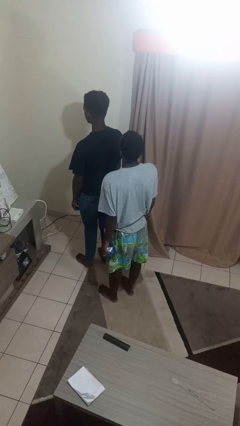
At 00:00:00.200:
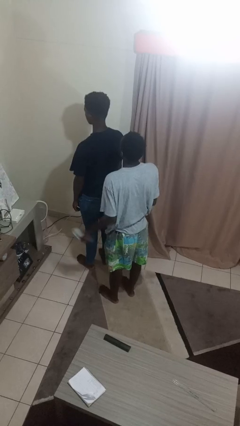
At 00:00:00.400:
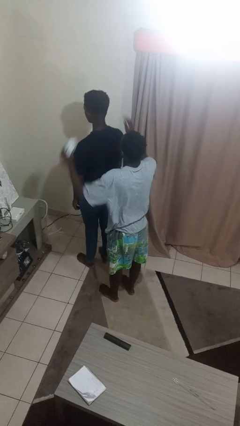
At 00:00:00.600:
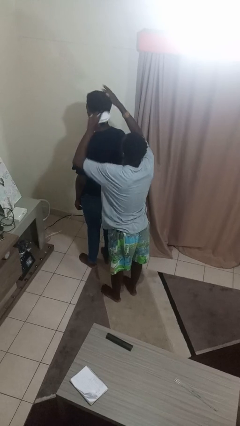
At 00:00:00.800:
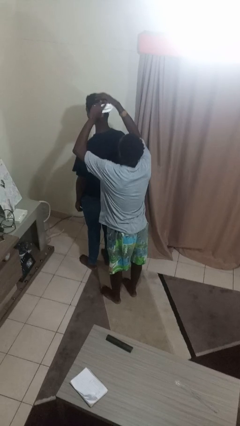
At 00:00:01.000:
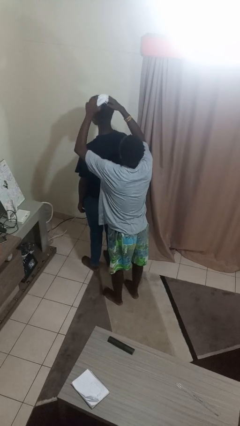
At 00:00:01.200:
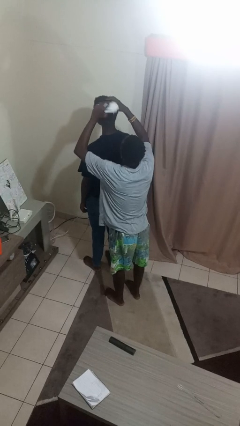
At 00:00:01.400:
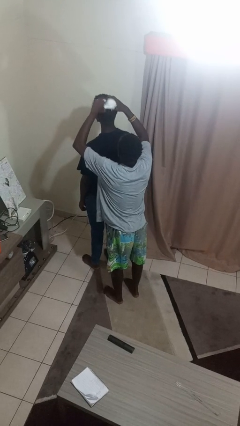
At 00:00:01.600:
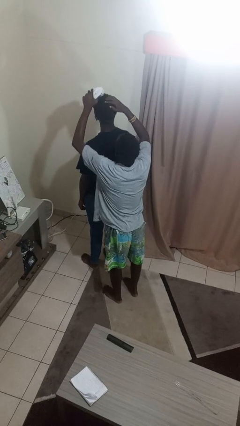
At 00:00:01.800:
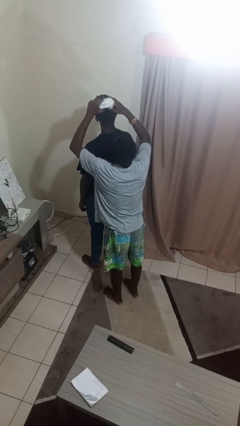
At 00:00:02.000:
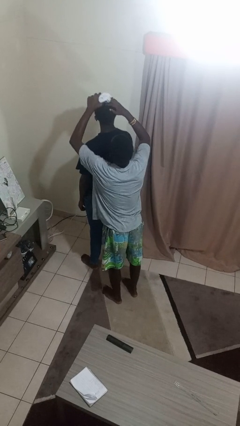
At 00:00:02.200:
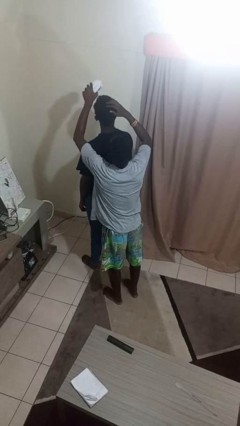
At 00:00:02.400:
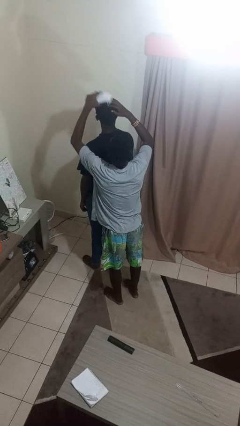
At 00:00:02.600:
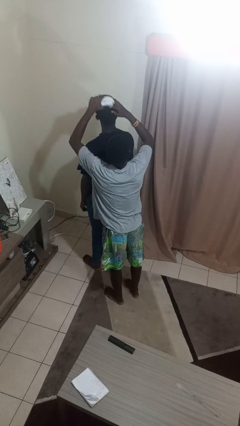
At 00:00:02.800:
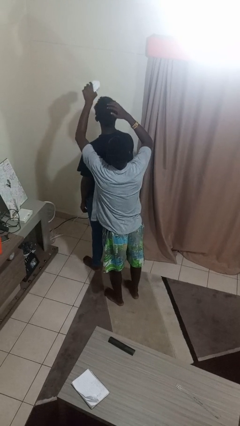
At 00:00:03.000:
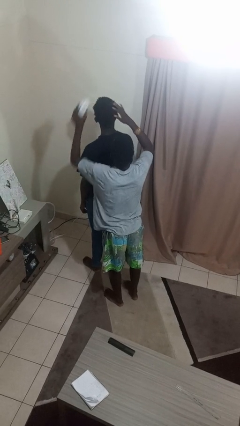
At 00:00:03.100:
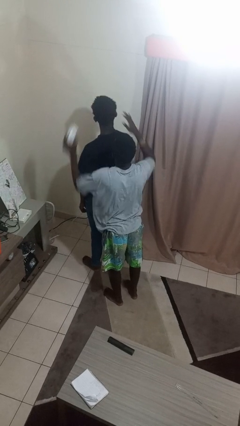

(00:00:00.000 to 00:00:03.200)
person brushes hair of person

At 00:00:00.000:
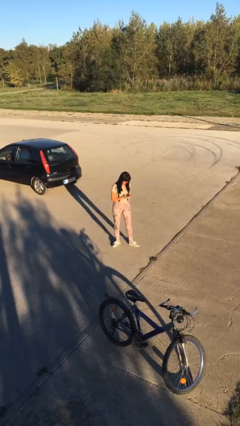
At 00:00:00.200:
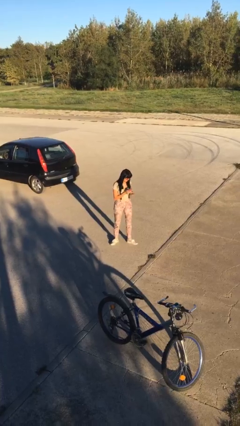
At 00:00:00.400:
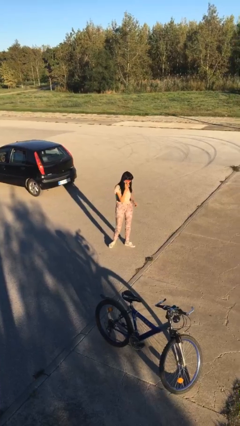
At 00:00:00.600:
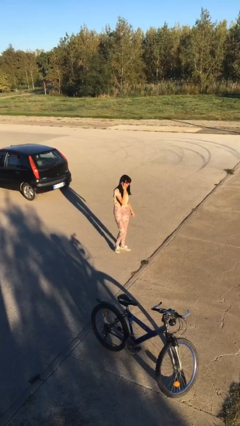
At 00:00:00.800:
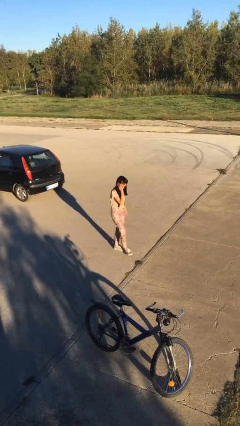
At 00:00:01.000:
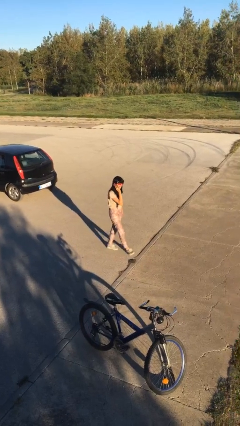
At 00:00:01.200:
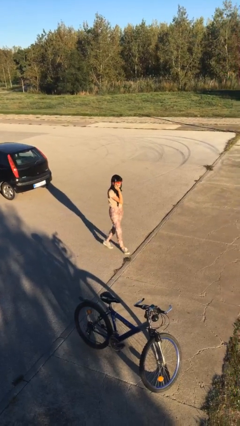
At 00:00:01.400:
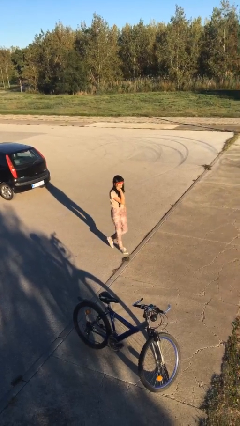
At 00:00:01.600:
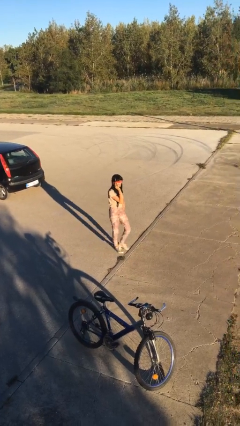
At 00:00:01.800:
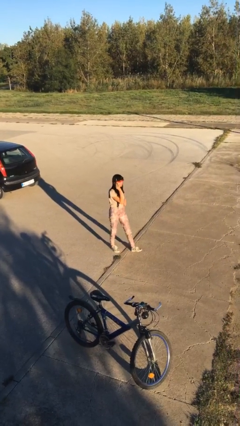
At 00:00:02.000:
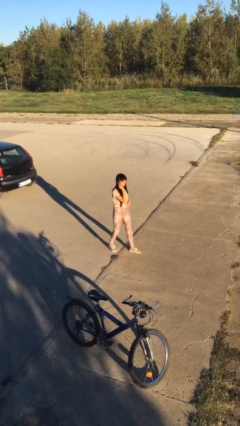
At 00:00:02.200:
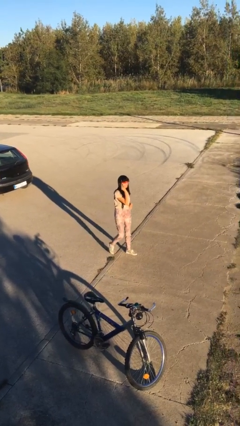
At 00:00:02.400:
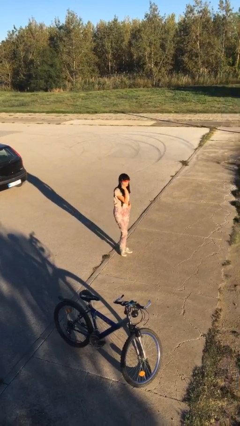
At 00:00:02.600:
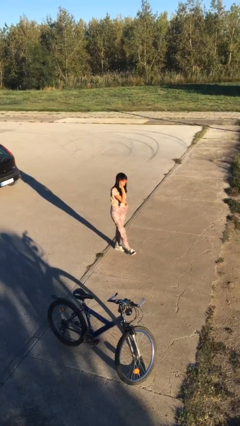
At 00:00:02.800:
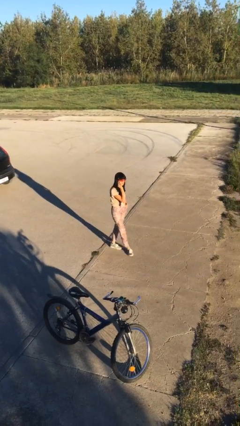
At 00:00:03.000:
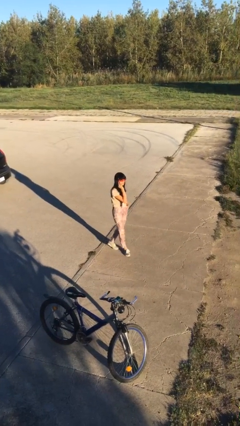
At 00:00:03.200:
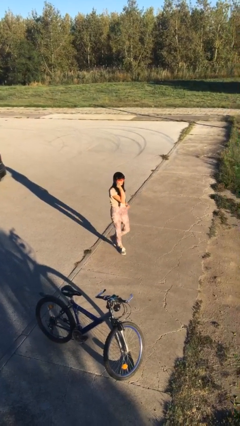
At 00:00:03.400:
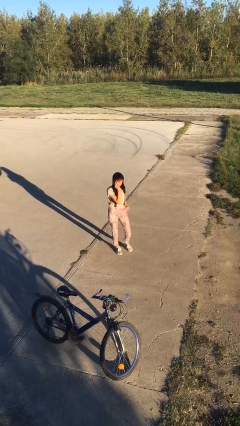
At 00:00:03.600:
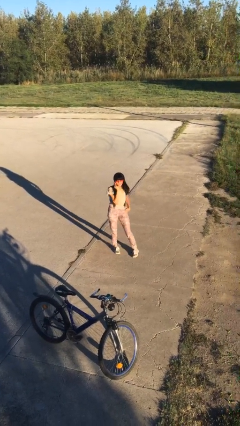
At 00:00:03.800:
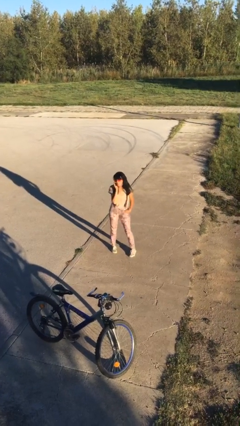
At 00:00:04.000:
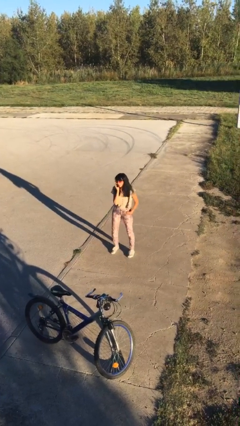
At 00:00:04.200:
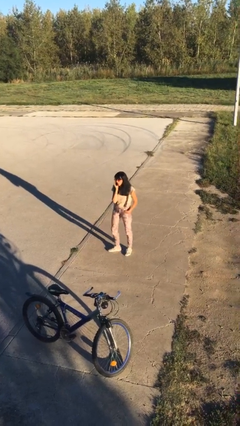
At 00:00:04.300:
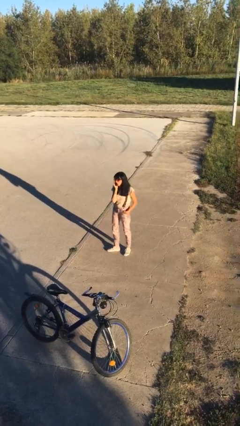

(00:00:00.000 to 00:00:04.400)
person talks on phone

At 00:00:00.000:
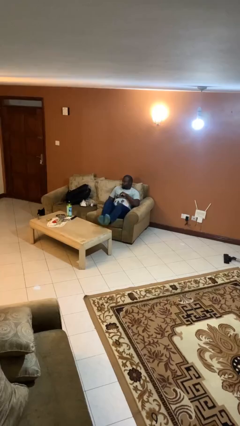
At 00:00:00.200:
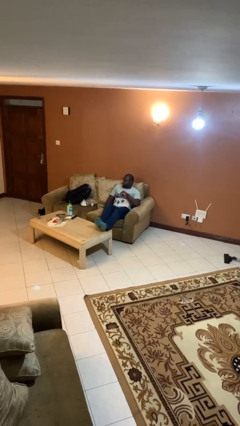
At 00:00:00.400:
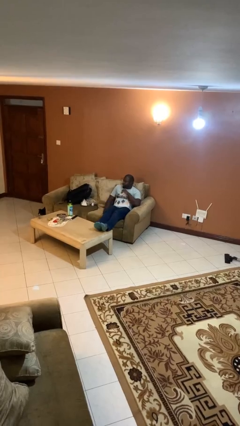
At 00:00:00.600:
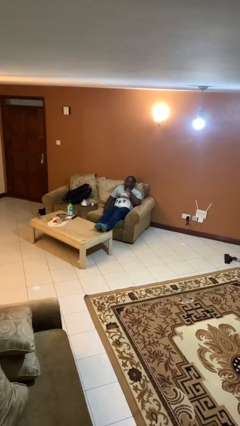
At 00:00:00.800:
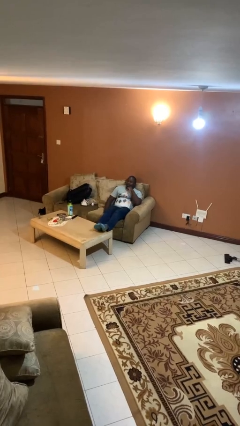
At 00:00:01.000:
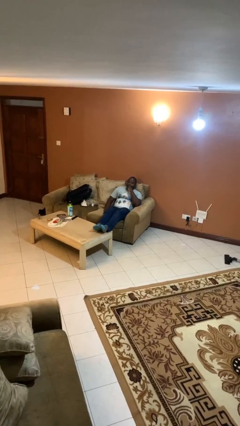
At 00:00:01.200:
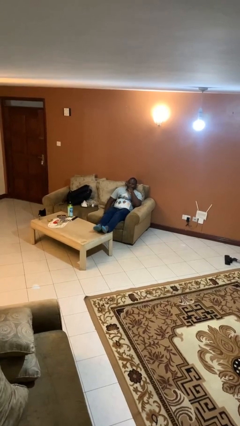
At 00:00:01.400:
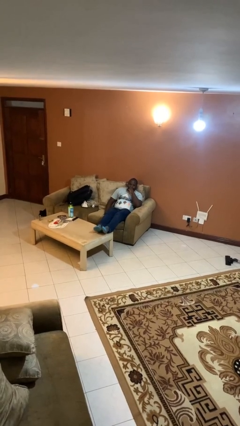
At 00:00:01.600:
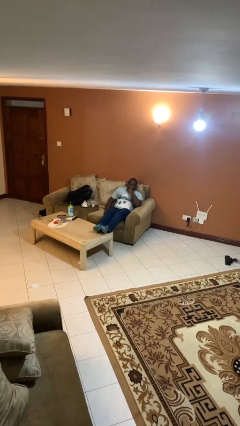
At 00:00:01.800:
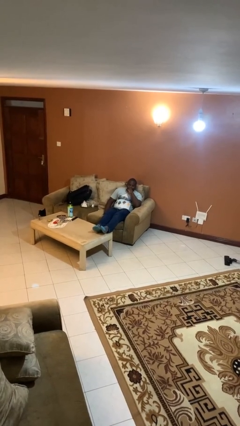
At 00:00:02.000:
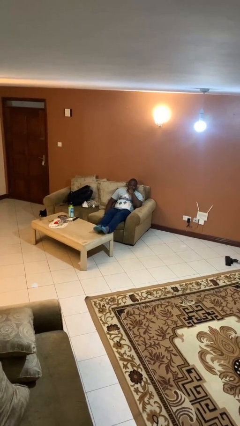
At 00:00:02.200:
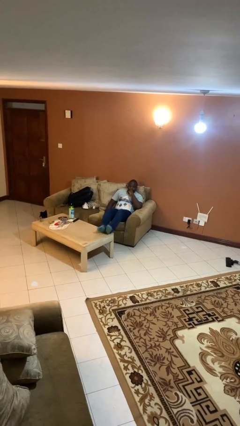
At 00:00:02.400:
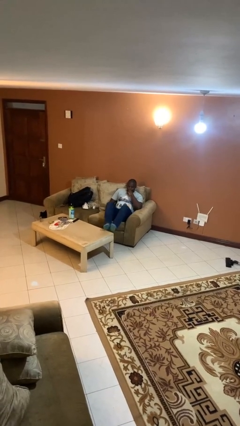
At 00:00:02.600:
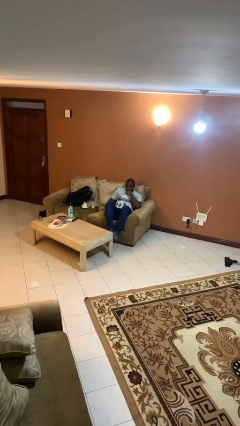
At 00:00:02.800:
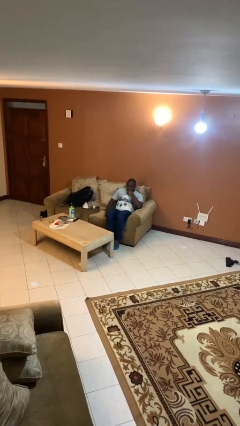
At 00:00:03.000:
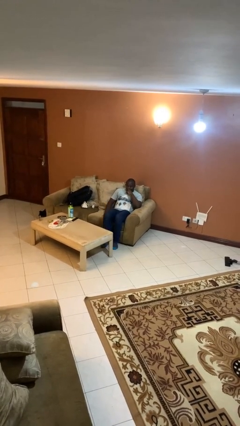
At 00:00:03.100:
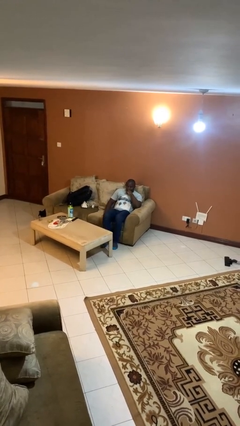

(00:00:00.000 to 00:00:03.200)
person puts feet up

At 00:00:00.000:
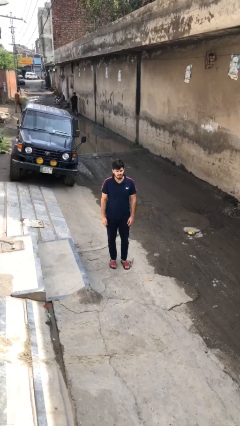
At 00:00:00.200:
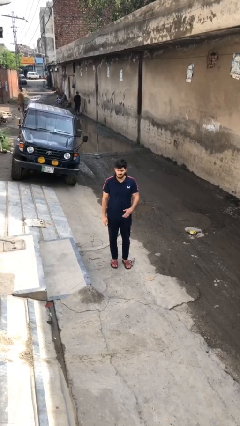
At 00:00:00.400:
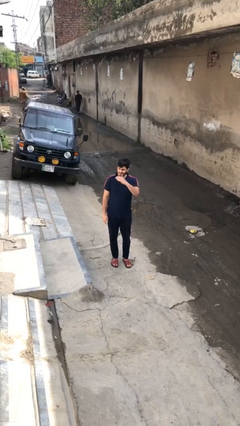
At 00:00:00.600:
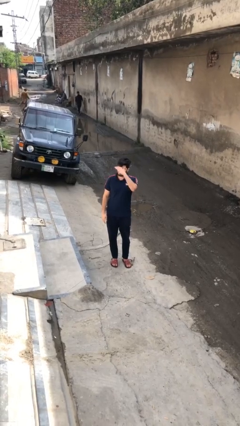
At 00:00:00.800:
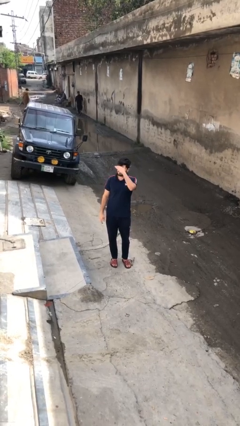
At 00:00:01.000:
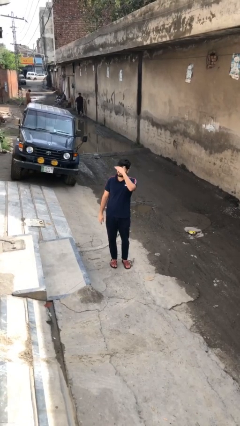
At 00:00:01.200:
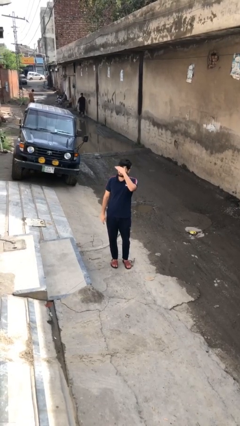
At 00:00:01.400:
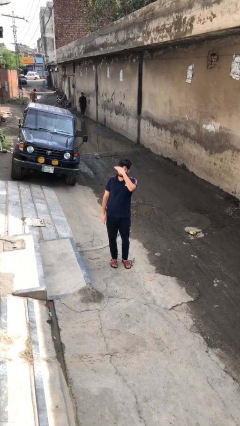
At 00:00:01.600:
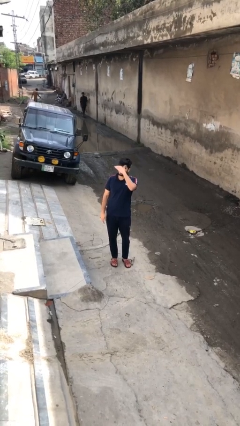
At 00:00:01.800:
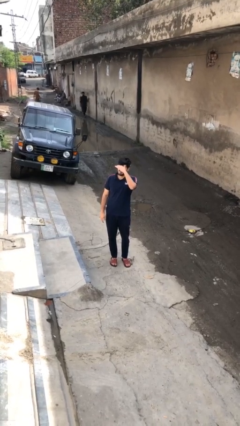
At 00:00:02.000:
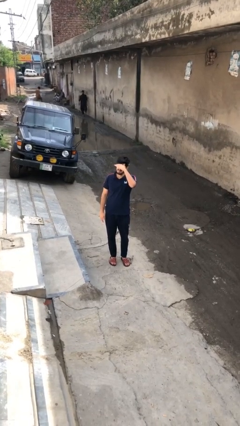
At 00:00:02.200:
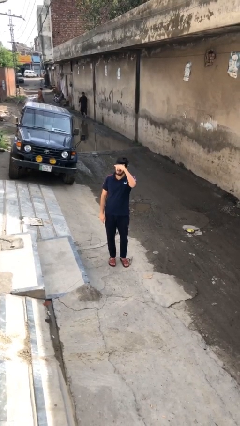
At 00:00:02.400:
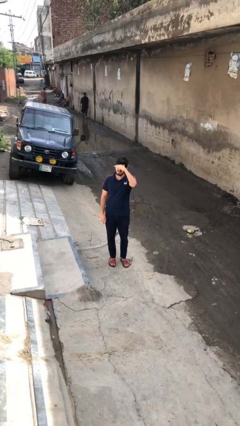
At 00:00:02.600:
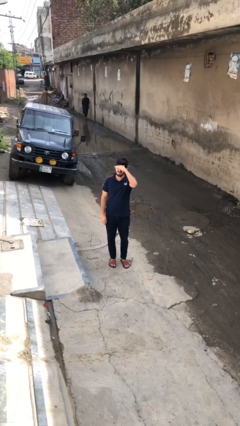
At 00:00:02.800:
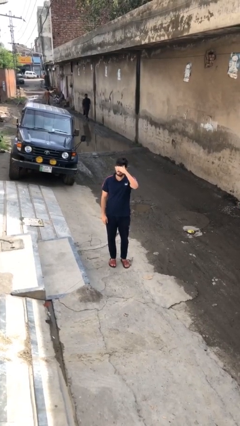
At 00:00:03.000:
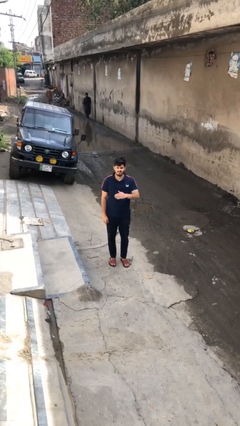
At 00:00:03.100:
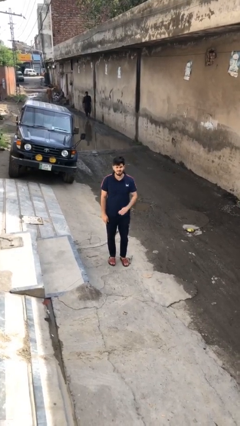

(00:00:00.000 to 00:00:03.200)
person shades eyes

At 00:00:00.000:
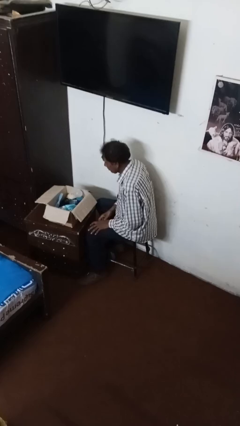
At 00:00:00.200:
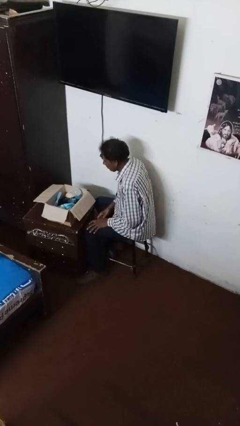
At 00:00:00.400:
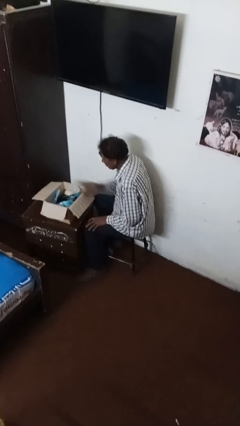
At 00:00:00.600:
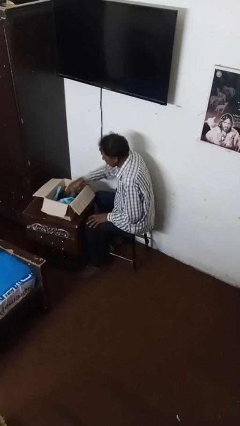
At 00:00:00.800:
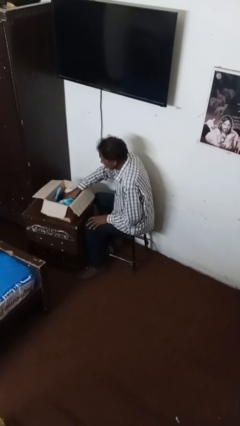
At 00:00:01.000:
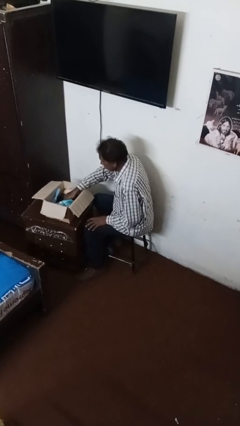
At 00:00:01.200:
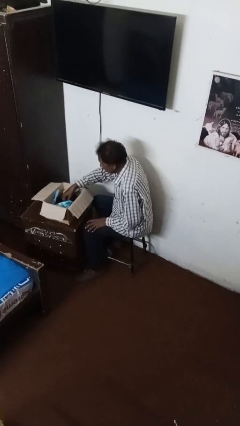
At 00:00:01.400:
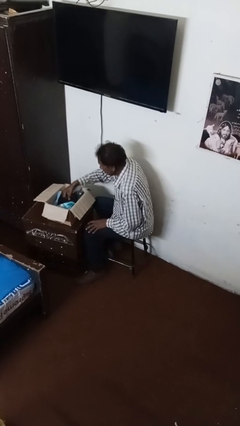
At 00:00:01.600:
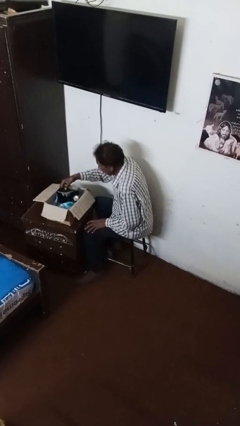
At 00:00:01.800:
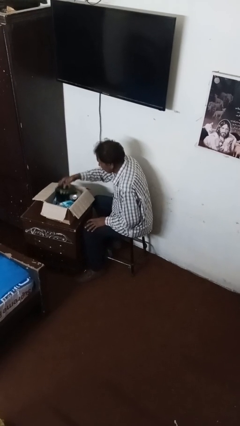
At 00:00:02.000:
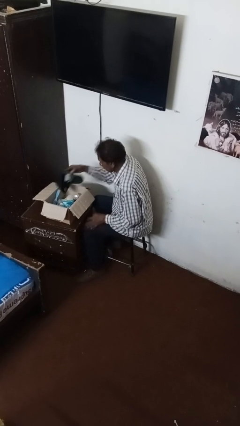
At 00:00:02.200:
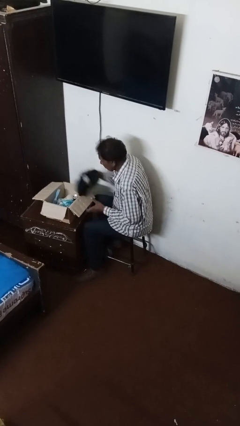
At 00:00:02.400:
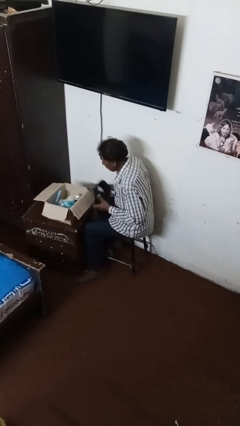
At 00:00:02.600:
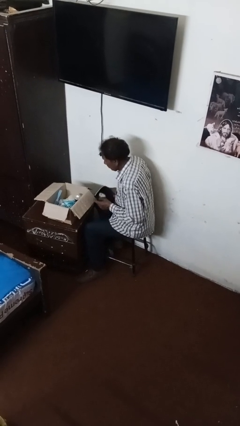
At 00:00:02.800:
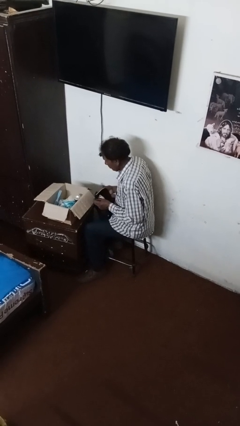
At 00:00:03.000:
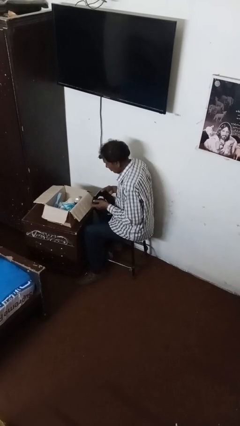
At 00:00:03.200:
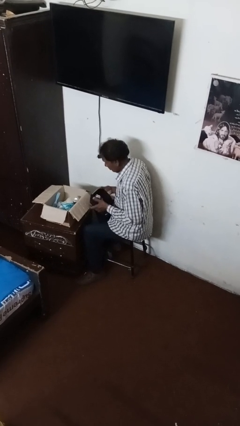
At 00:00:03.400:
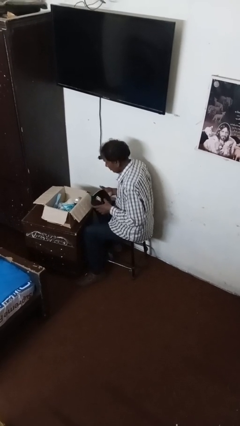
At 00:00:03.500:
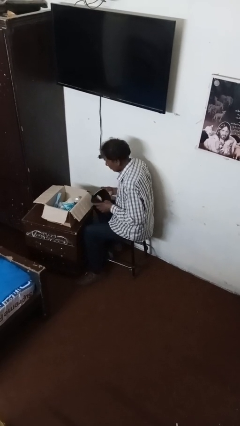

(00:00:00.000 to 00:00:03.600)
person searches in box
